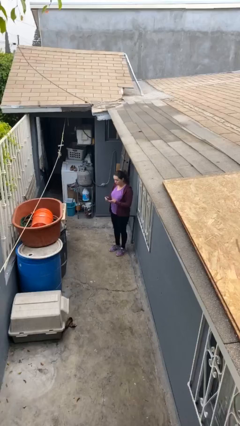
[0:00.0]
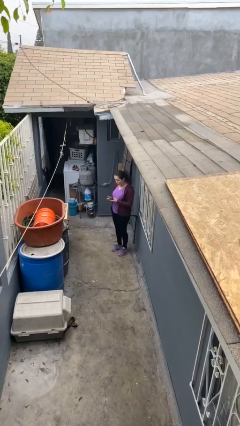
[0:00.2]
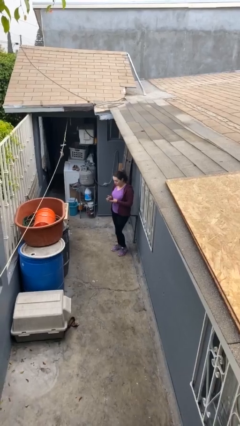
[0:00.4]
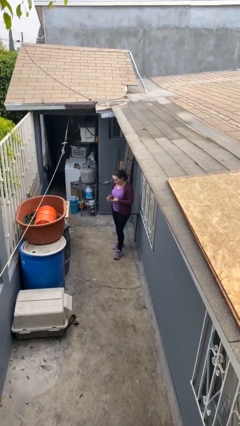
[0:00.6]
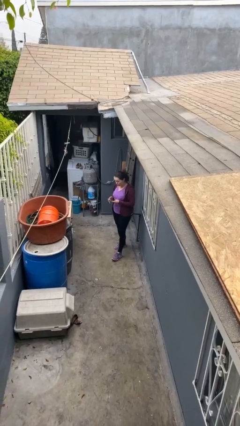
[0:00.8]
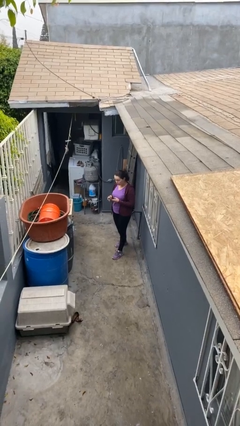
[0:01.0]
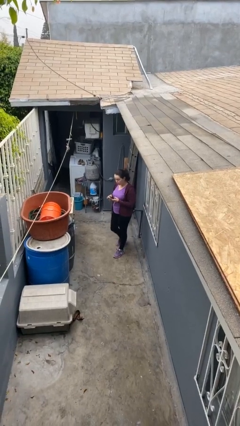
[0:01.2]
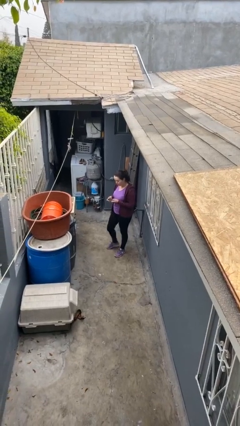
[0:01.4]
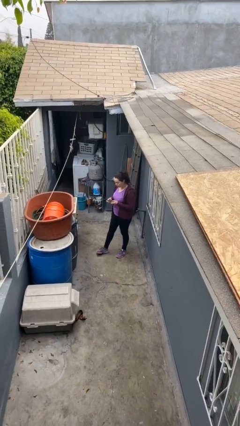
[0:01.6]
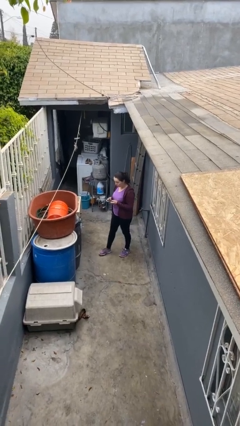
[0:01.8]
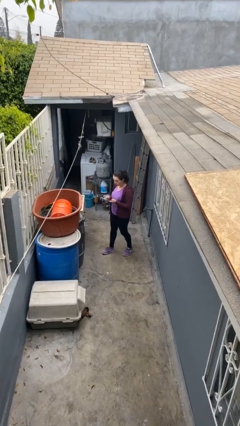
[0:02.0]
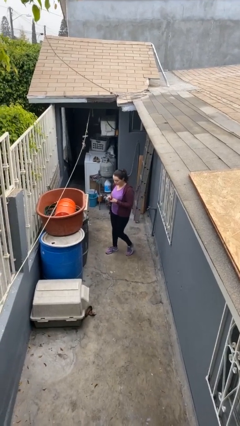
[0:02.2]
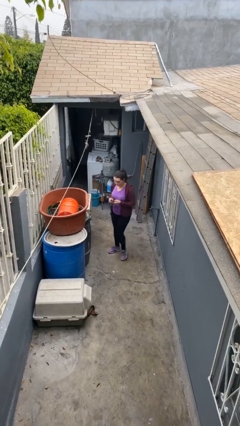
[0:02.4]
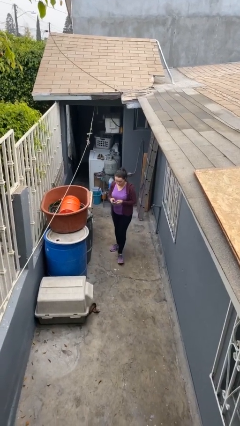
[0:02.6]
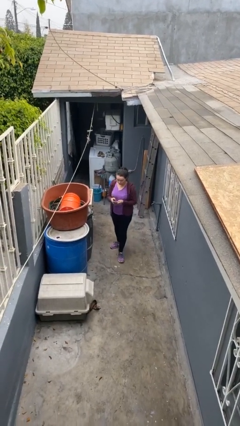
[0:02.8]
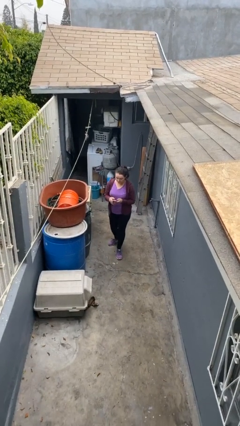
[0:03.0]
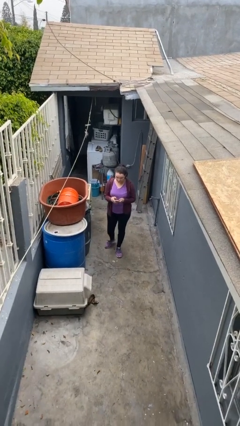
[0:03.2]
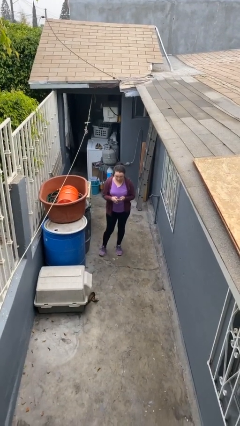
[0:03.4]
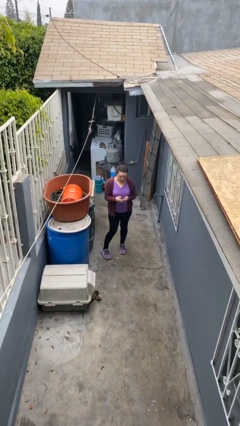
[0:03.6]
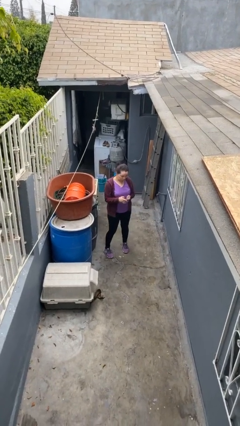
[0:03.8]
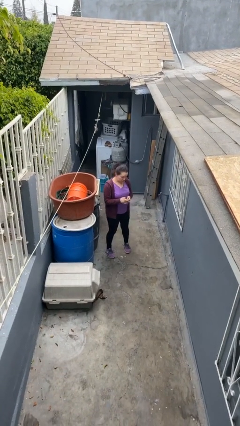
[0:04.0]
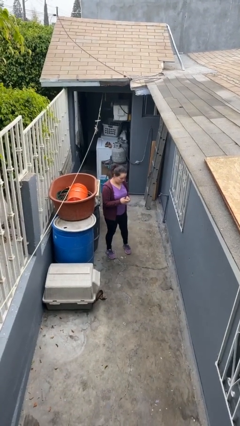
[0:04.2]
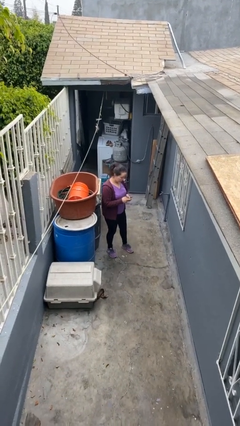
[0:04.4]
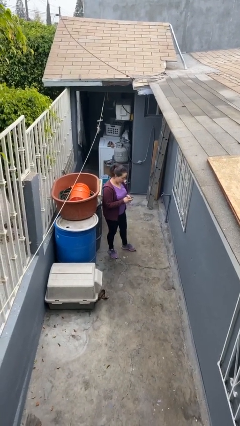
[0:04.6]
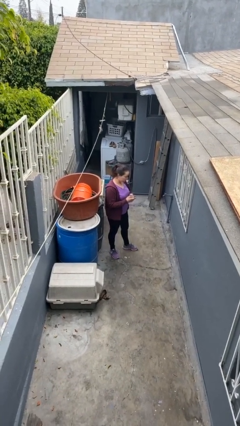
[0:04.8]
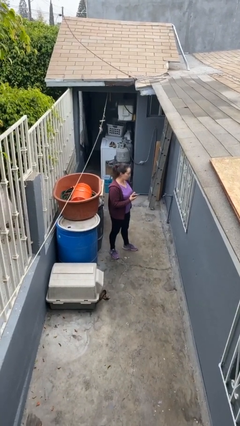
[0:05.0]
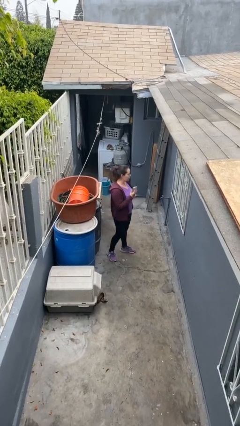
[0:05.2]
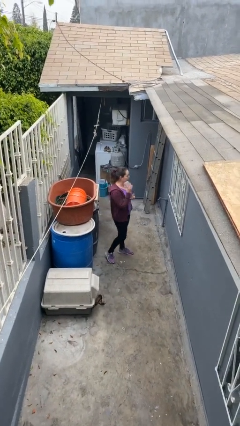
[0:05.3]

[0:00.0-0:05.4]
person texts on phone

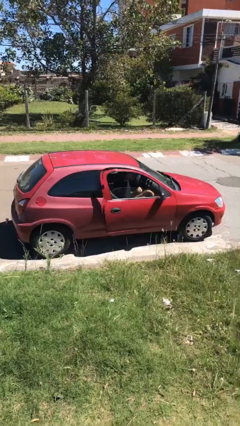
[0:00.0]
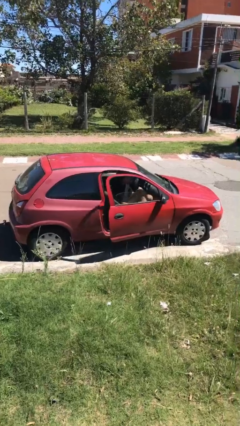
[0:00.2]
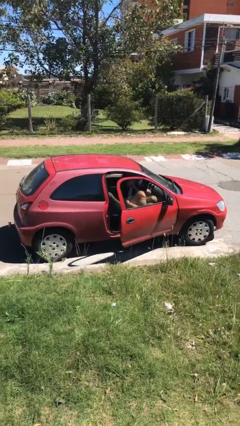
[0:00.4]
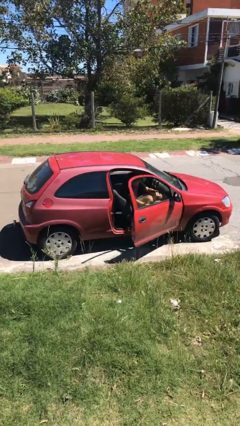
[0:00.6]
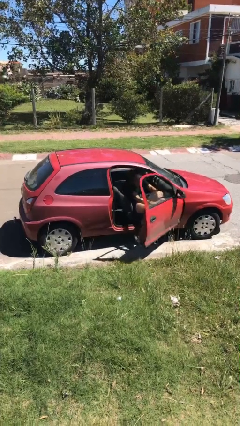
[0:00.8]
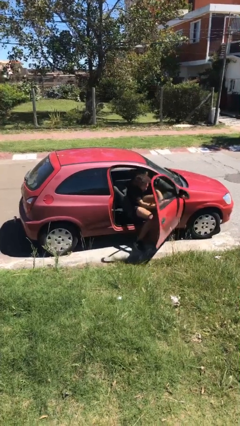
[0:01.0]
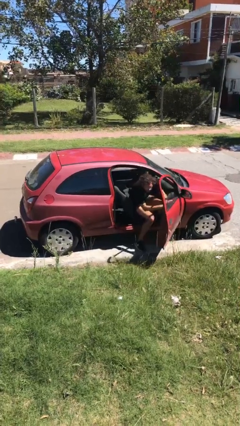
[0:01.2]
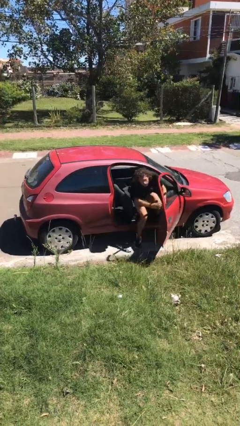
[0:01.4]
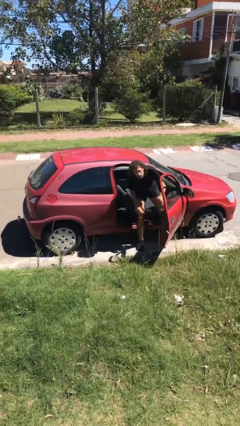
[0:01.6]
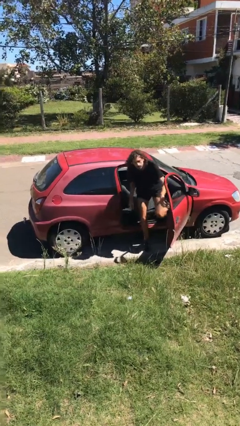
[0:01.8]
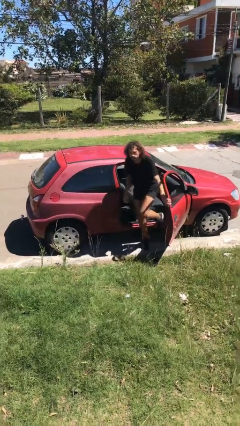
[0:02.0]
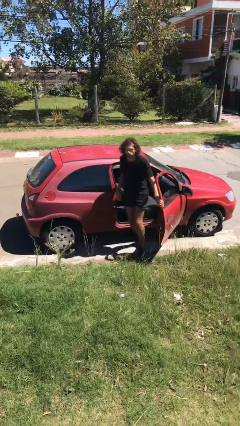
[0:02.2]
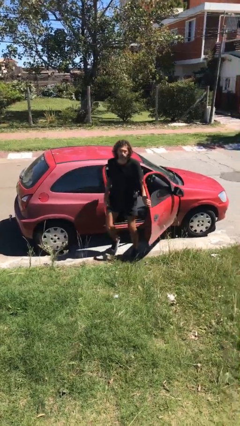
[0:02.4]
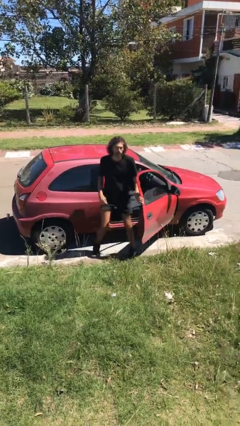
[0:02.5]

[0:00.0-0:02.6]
car drops off person

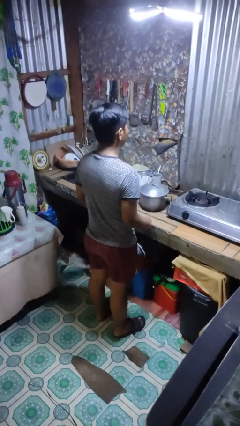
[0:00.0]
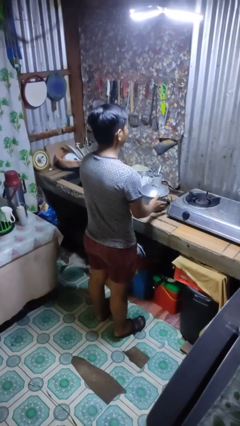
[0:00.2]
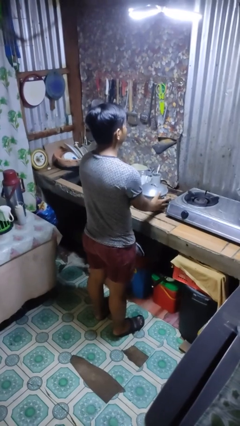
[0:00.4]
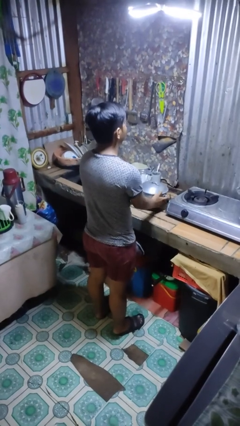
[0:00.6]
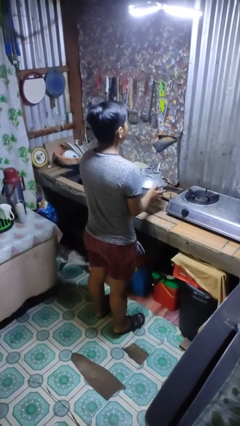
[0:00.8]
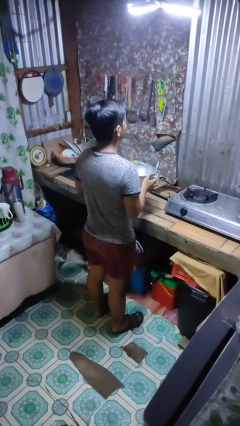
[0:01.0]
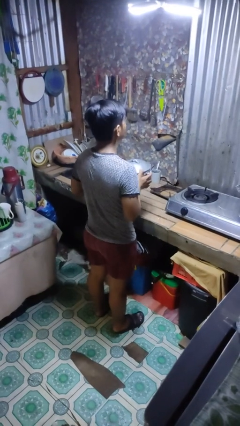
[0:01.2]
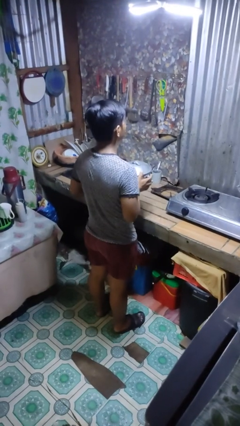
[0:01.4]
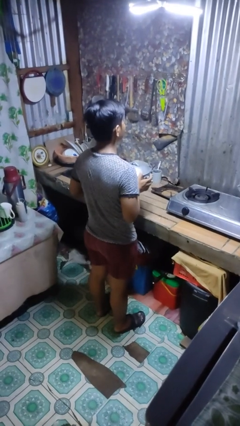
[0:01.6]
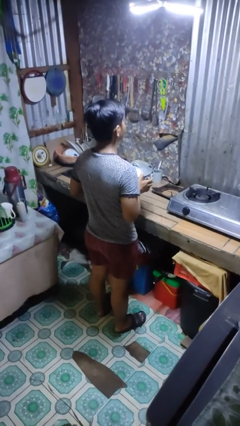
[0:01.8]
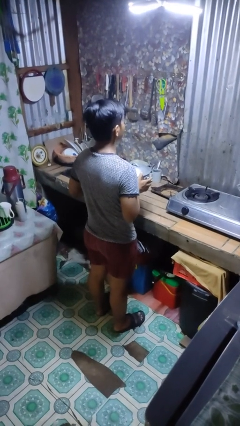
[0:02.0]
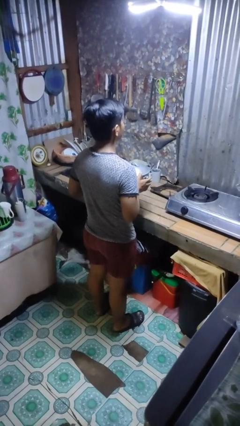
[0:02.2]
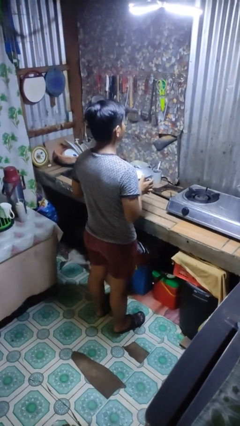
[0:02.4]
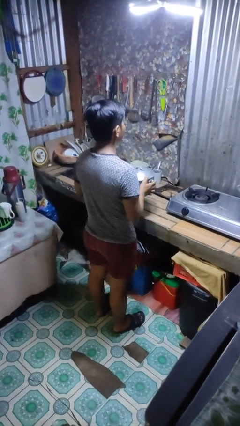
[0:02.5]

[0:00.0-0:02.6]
person picks up object from countertop

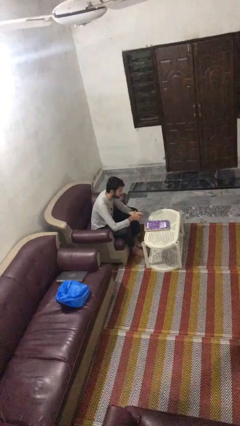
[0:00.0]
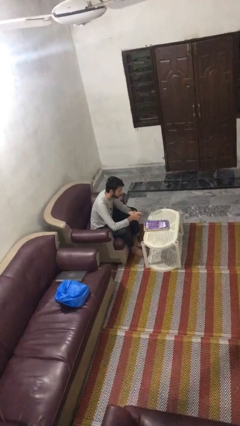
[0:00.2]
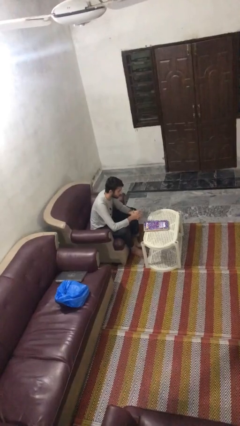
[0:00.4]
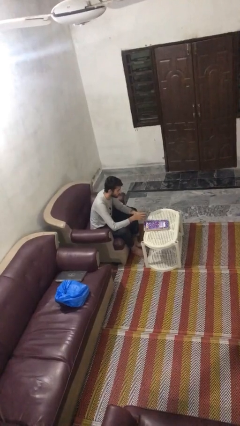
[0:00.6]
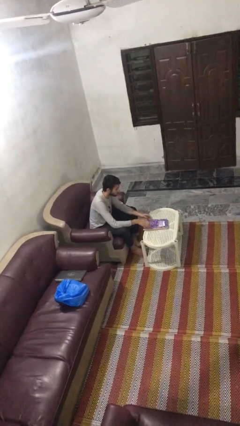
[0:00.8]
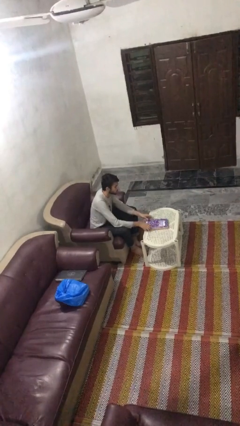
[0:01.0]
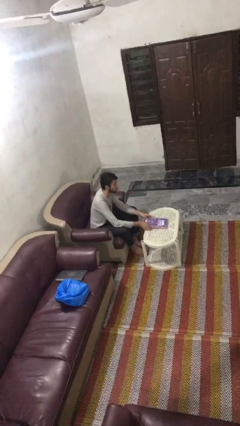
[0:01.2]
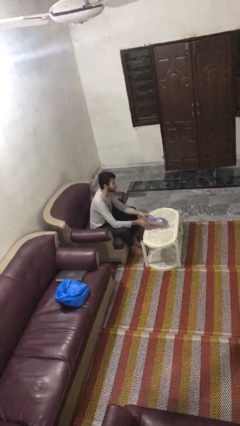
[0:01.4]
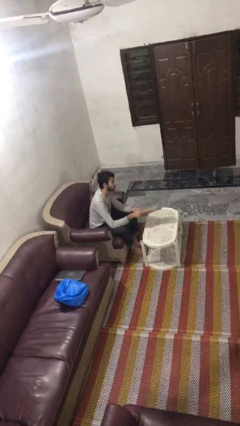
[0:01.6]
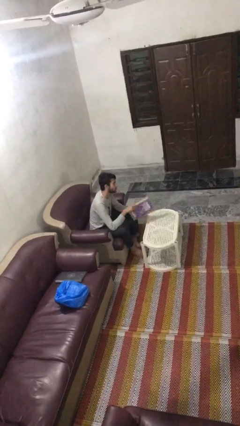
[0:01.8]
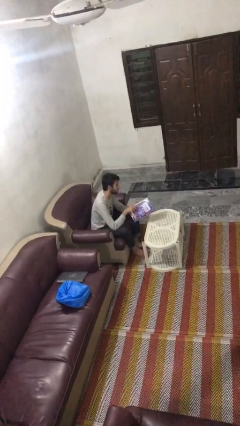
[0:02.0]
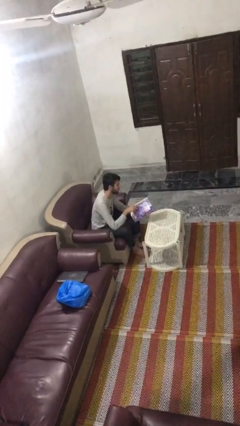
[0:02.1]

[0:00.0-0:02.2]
person picks up object from table

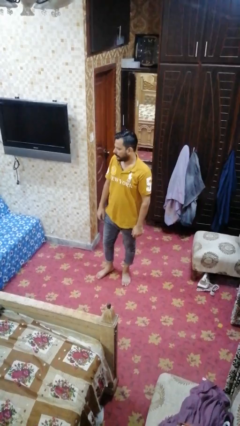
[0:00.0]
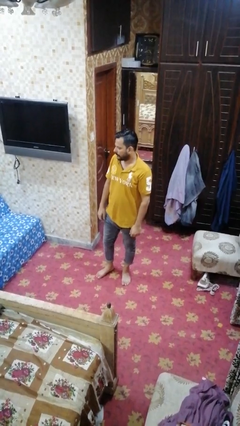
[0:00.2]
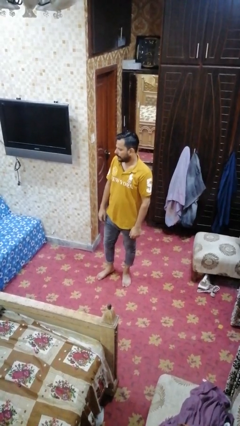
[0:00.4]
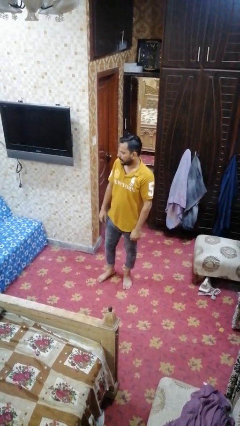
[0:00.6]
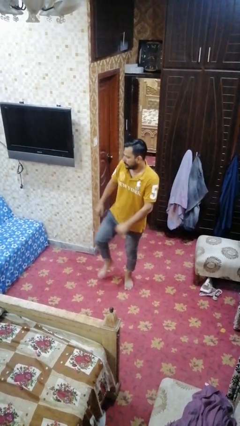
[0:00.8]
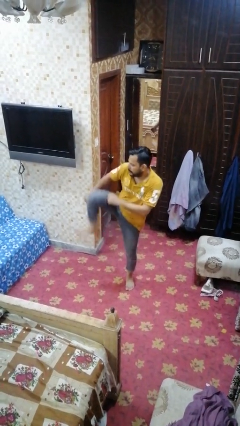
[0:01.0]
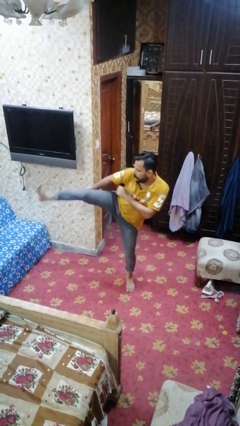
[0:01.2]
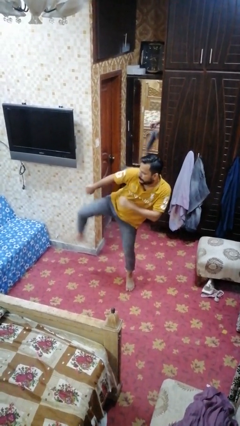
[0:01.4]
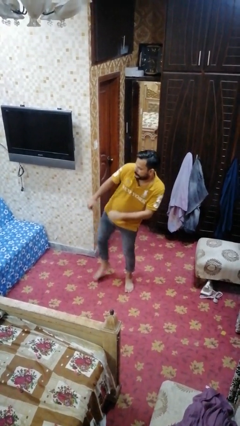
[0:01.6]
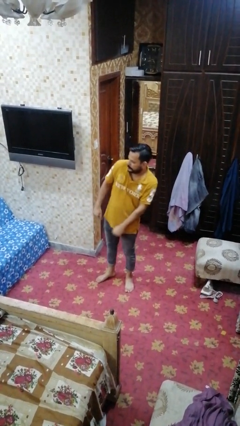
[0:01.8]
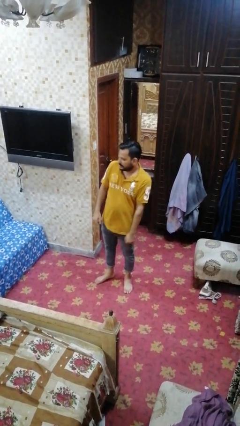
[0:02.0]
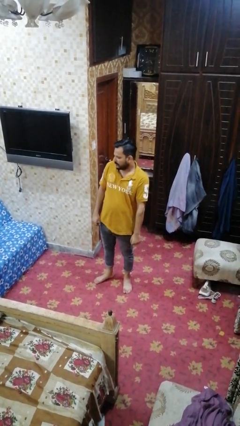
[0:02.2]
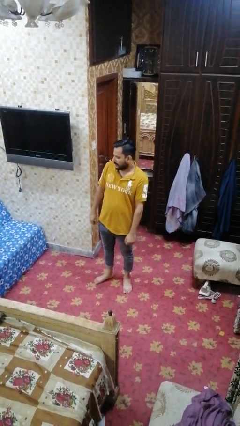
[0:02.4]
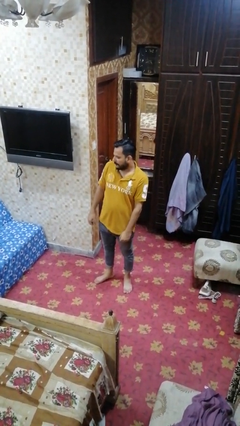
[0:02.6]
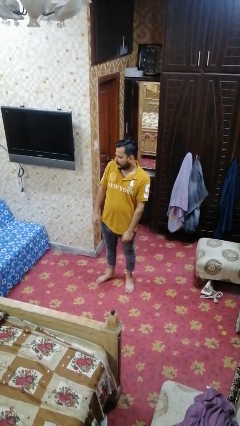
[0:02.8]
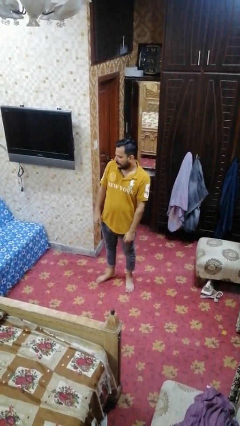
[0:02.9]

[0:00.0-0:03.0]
person karate kicks

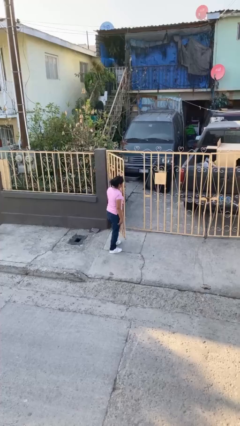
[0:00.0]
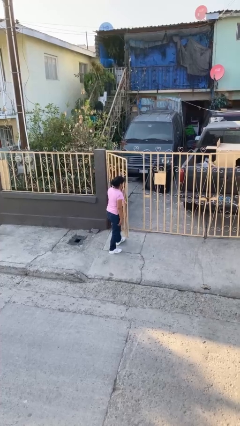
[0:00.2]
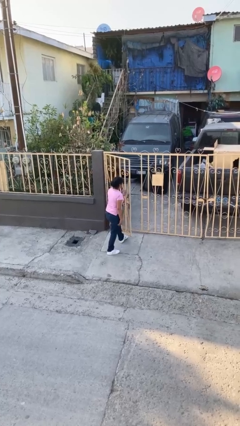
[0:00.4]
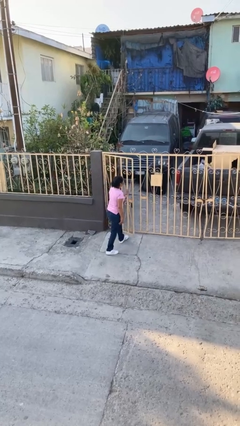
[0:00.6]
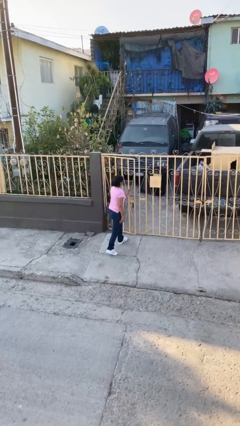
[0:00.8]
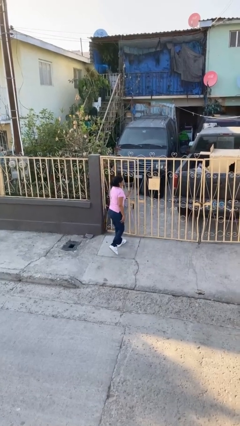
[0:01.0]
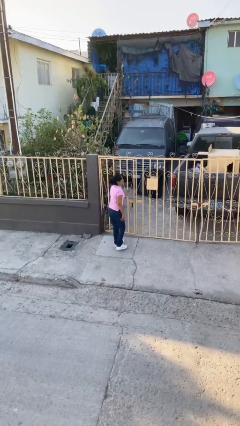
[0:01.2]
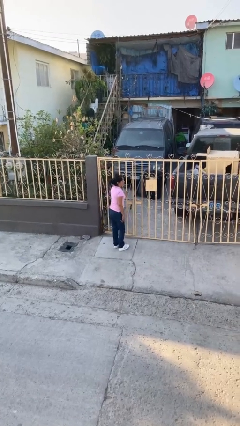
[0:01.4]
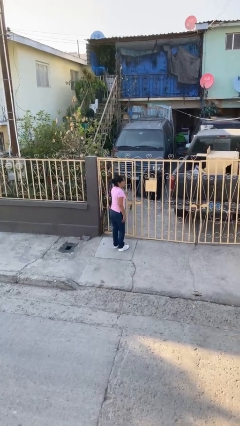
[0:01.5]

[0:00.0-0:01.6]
person closes facility door
